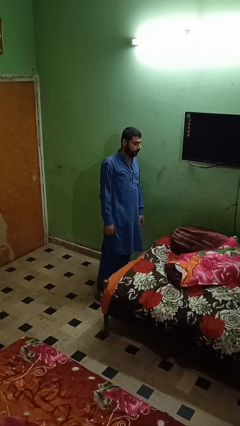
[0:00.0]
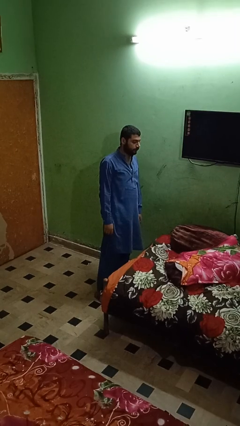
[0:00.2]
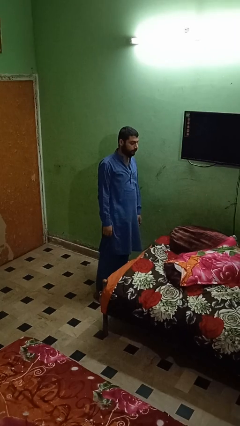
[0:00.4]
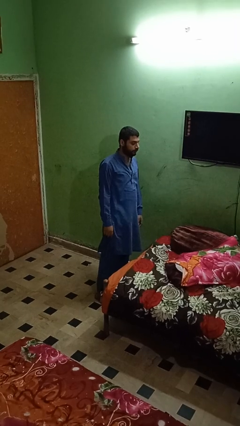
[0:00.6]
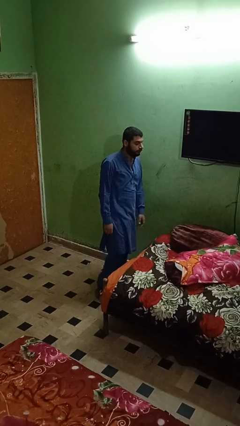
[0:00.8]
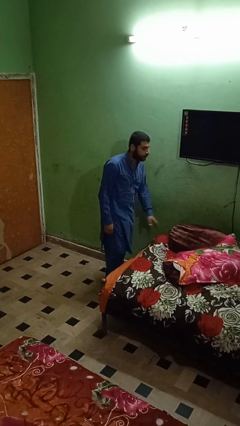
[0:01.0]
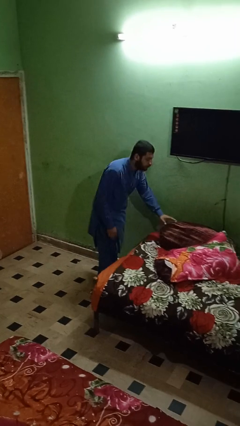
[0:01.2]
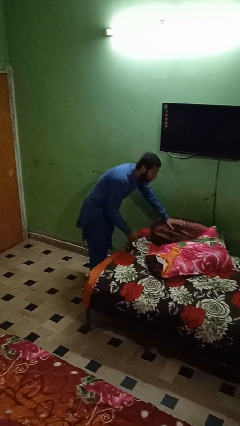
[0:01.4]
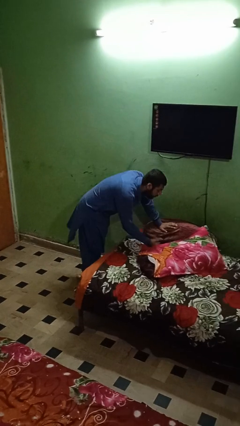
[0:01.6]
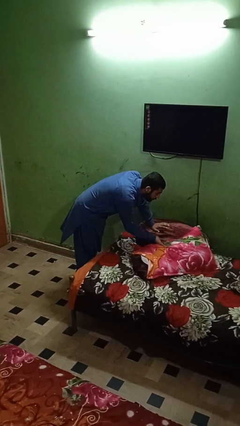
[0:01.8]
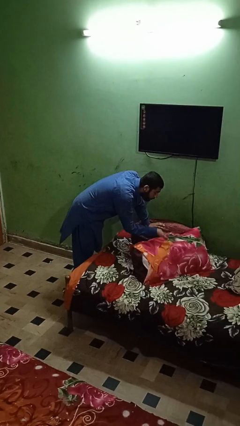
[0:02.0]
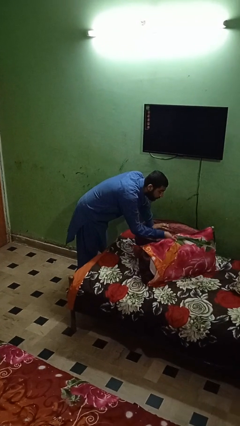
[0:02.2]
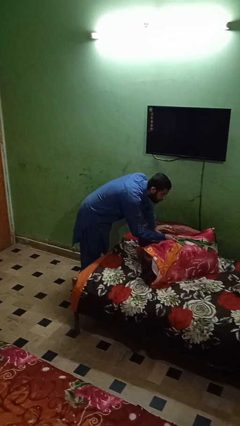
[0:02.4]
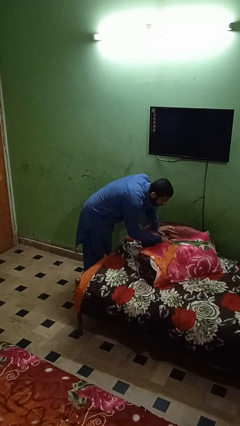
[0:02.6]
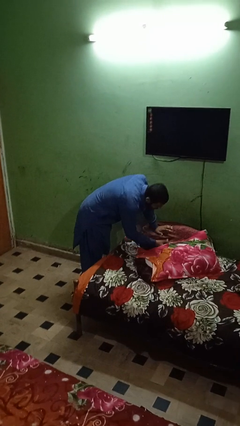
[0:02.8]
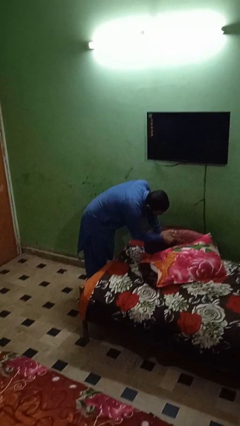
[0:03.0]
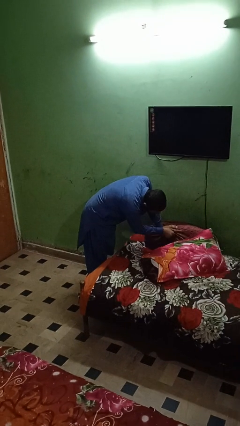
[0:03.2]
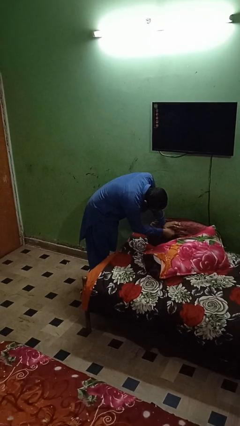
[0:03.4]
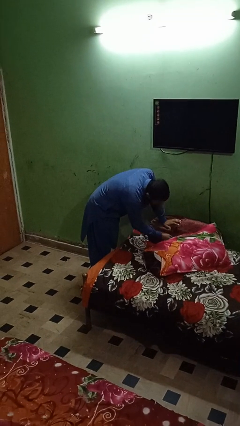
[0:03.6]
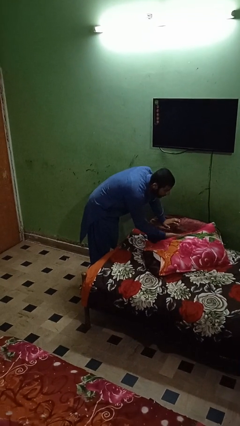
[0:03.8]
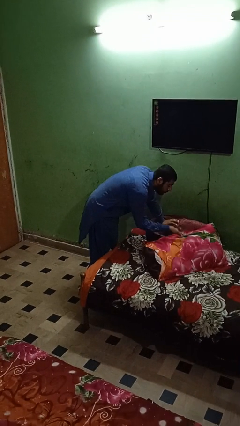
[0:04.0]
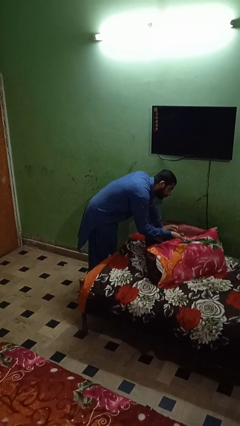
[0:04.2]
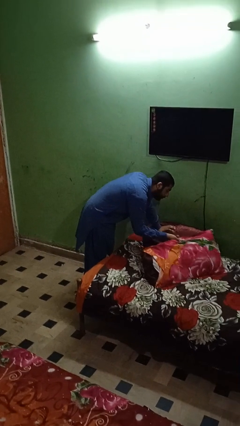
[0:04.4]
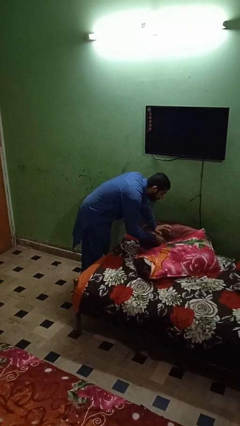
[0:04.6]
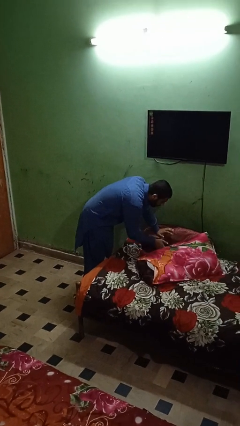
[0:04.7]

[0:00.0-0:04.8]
person searches in couch

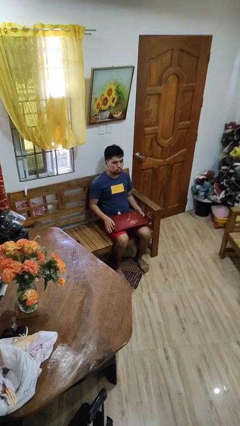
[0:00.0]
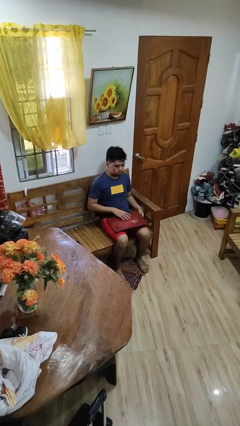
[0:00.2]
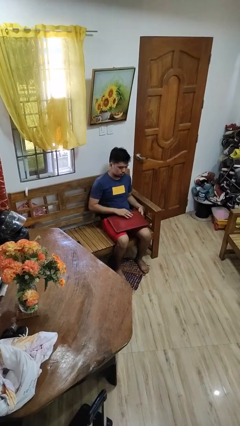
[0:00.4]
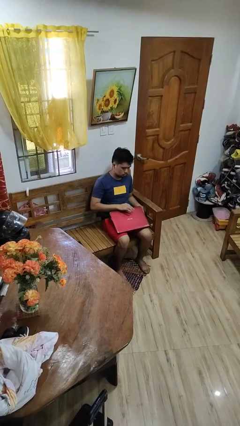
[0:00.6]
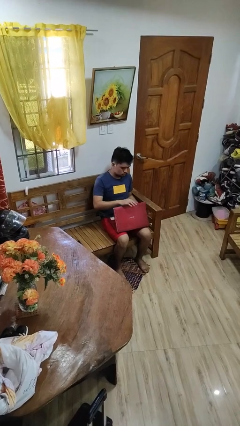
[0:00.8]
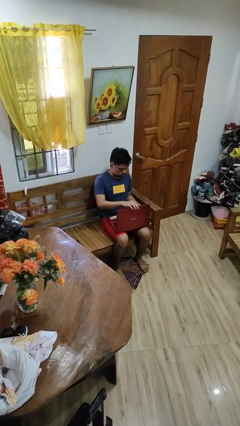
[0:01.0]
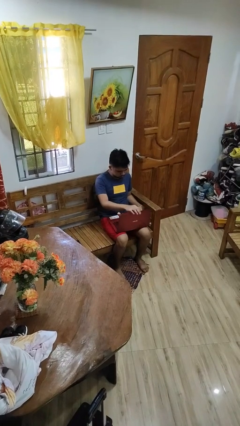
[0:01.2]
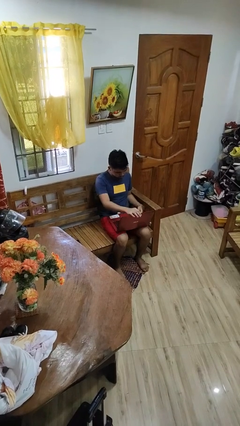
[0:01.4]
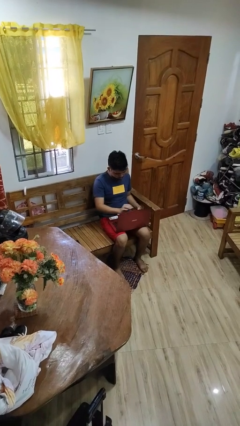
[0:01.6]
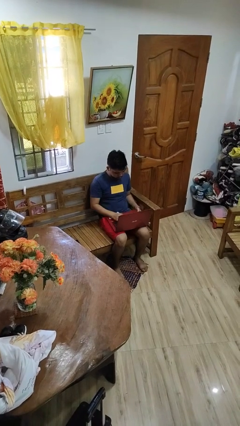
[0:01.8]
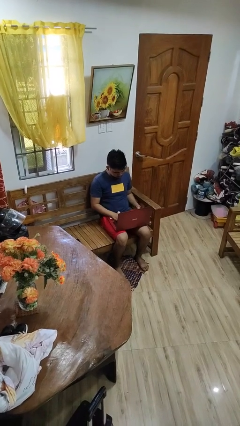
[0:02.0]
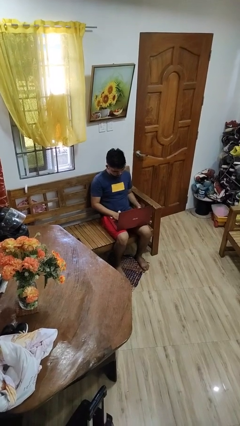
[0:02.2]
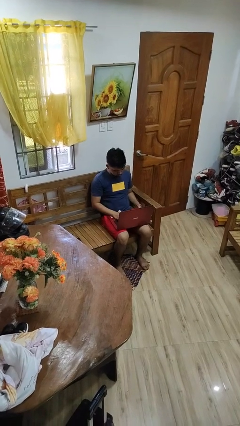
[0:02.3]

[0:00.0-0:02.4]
person opens laptop

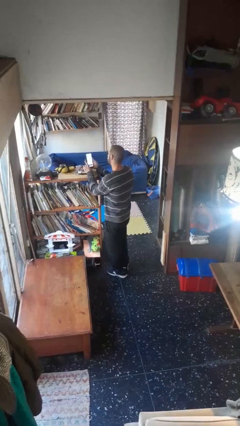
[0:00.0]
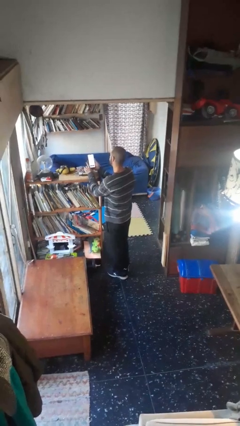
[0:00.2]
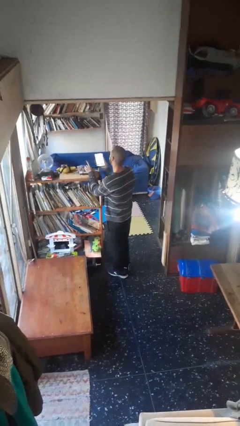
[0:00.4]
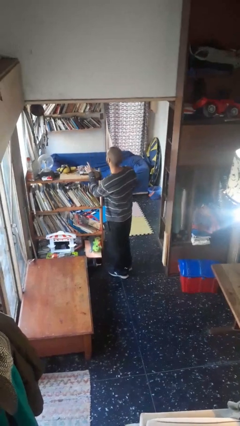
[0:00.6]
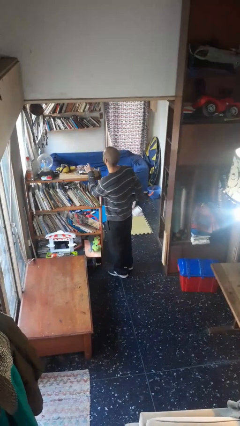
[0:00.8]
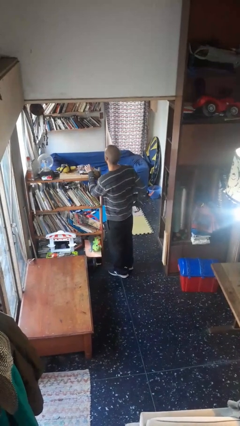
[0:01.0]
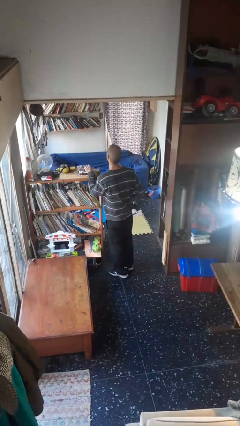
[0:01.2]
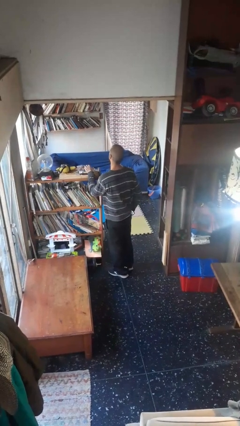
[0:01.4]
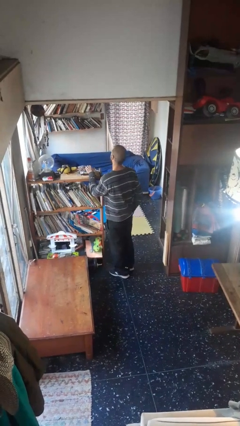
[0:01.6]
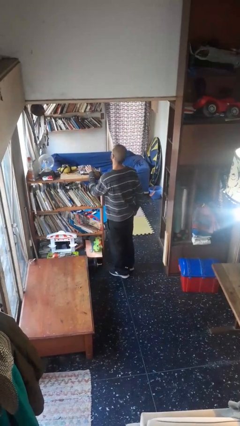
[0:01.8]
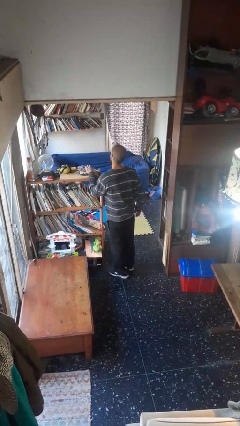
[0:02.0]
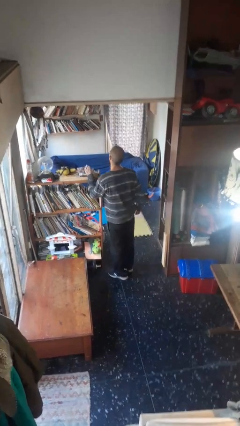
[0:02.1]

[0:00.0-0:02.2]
person puts phone into pocket

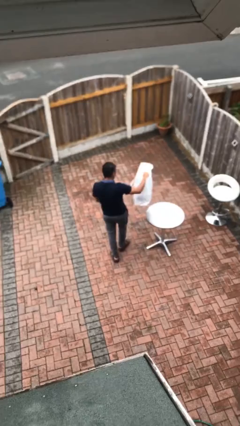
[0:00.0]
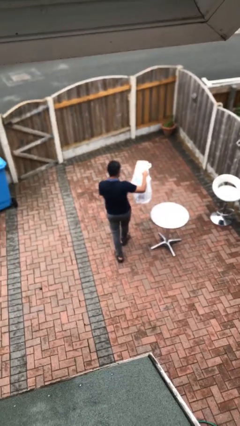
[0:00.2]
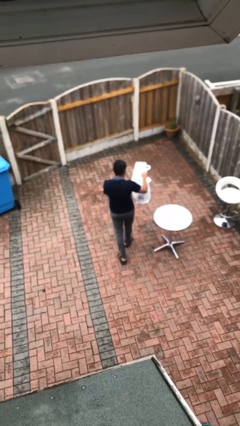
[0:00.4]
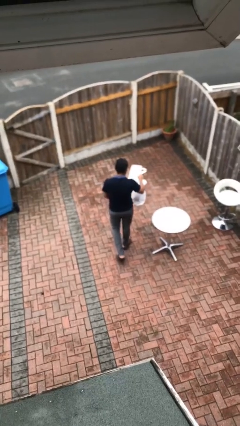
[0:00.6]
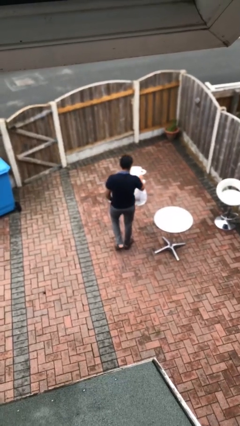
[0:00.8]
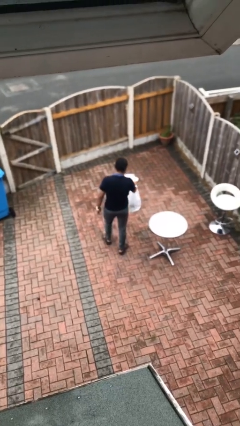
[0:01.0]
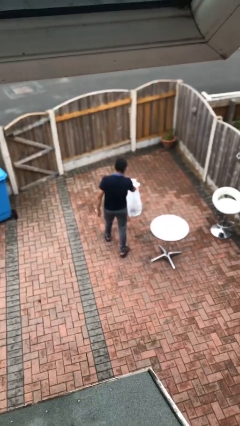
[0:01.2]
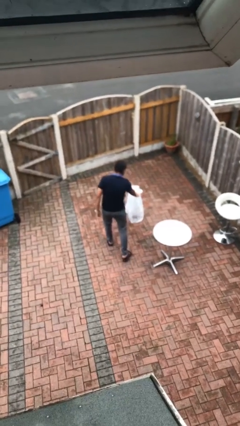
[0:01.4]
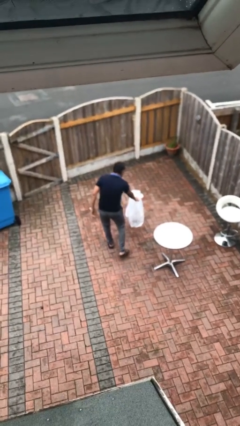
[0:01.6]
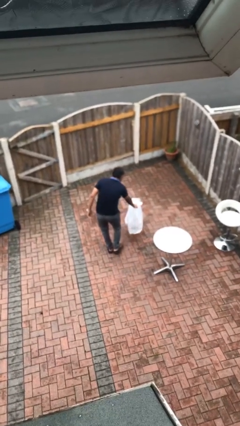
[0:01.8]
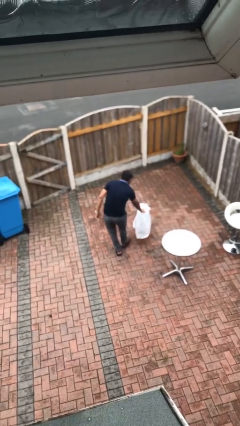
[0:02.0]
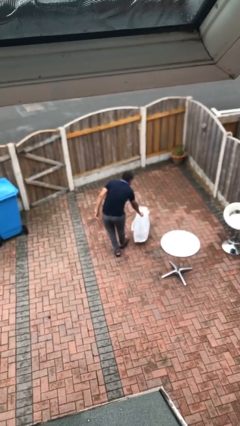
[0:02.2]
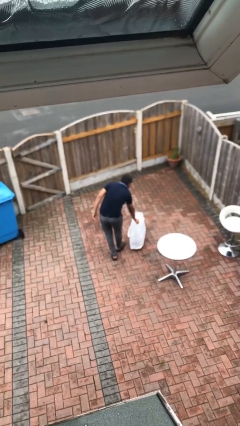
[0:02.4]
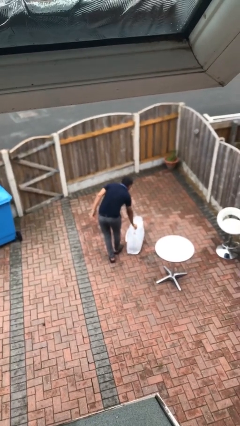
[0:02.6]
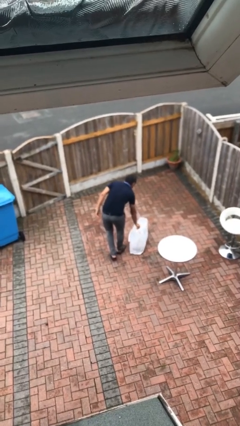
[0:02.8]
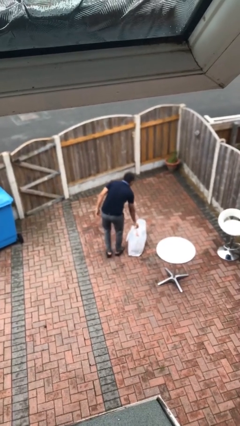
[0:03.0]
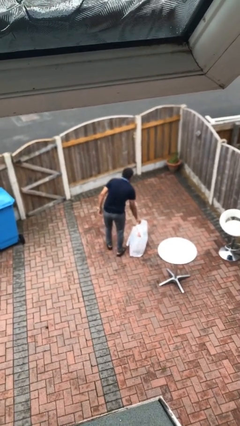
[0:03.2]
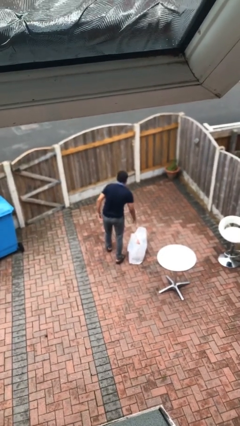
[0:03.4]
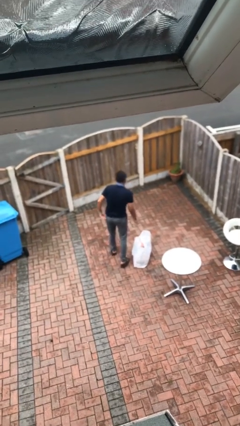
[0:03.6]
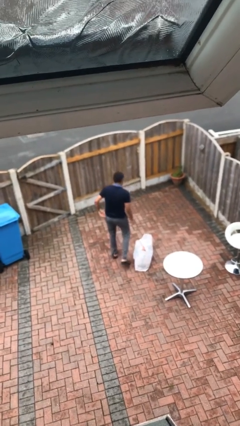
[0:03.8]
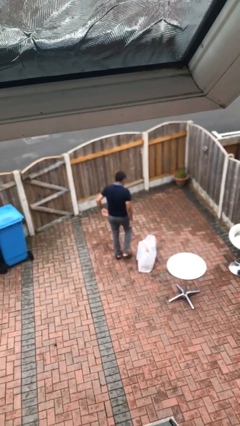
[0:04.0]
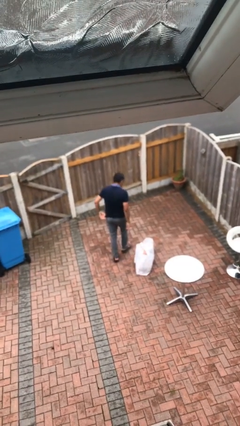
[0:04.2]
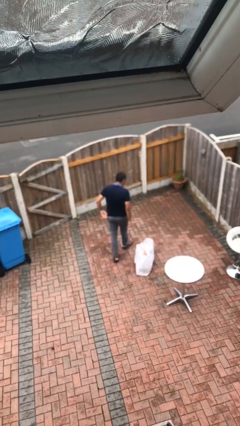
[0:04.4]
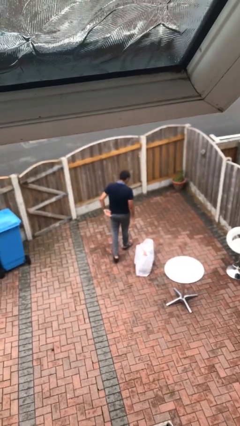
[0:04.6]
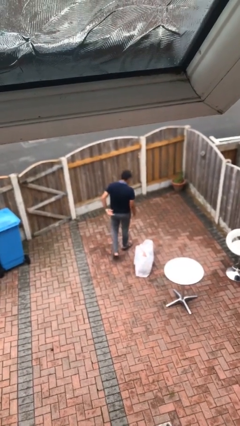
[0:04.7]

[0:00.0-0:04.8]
person puts down object on floor

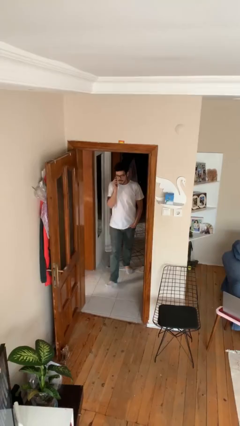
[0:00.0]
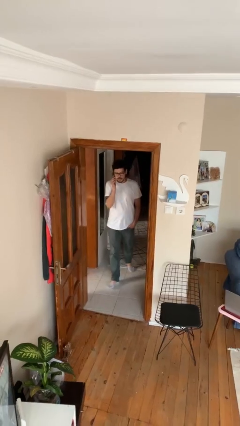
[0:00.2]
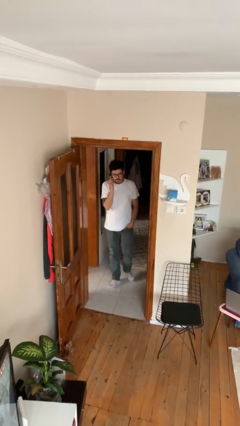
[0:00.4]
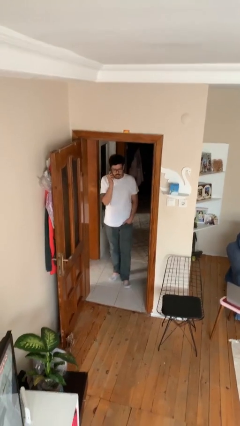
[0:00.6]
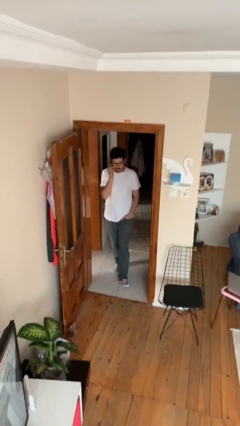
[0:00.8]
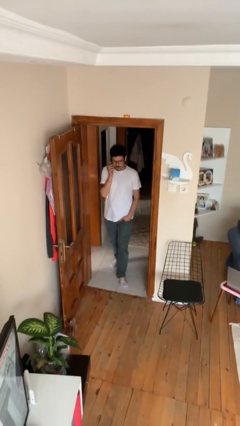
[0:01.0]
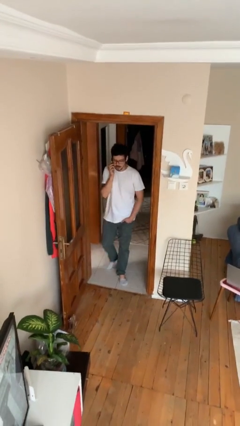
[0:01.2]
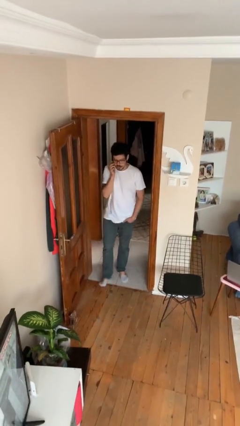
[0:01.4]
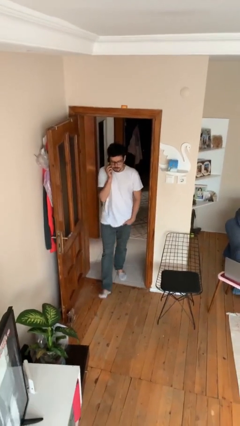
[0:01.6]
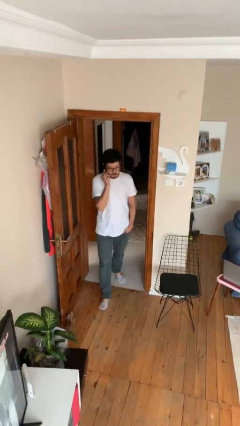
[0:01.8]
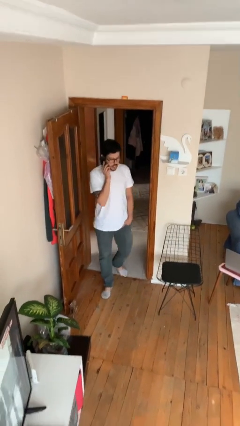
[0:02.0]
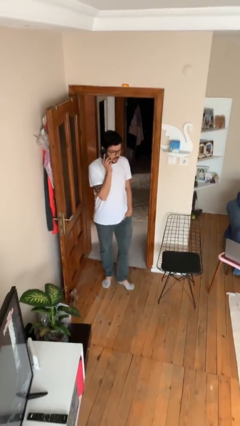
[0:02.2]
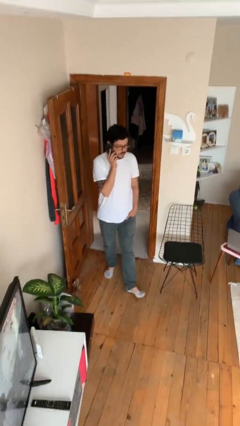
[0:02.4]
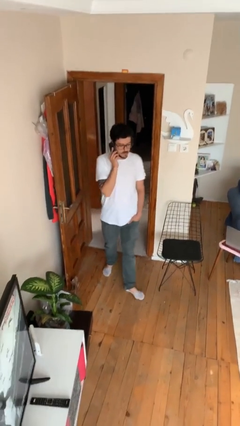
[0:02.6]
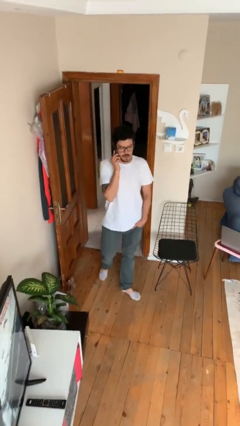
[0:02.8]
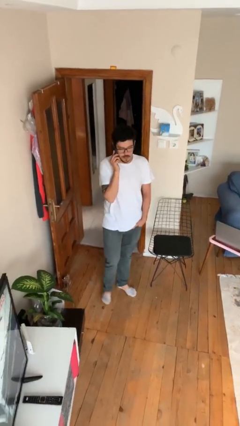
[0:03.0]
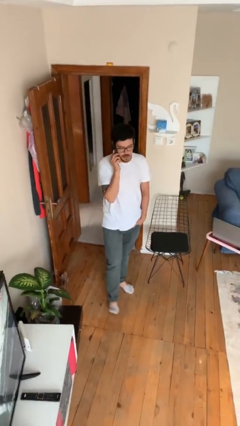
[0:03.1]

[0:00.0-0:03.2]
person enters scene through structure

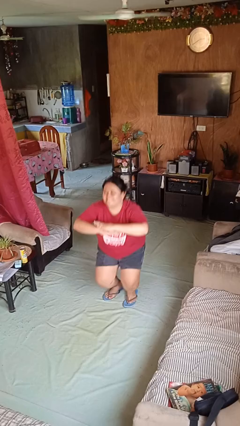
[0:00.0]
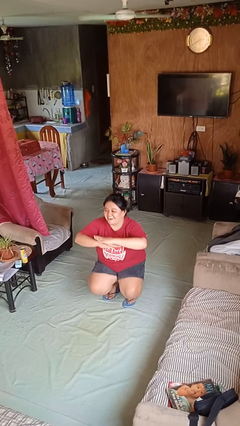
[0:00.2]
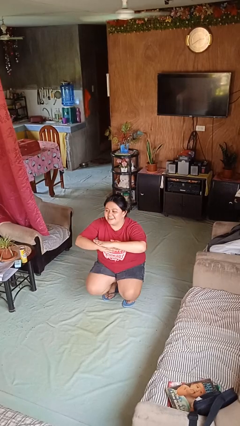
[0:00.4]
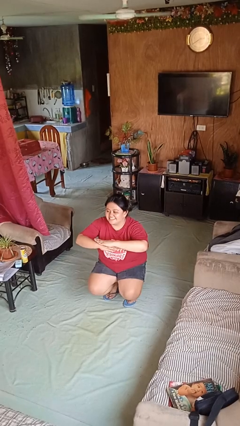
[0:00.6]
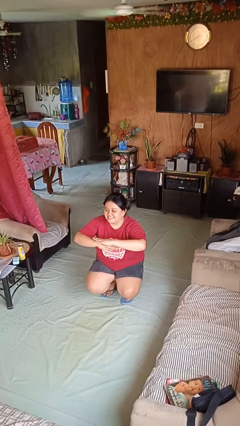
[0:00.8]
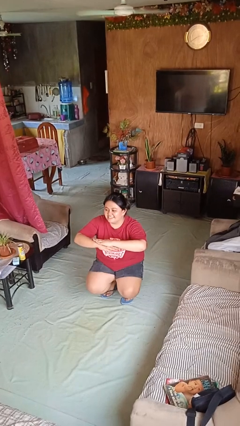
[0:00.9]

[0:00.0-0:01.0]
person squats
